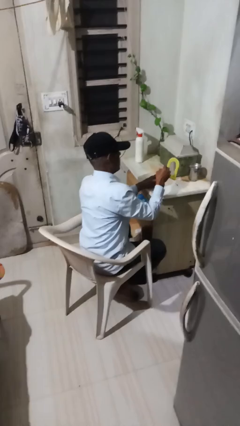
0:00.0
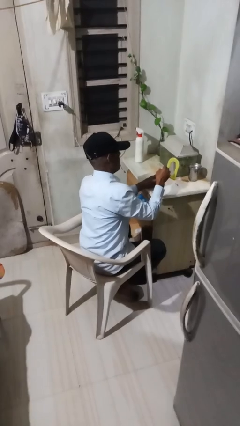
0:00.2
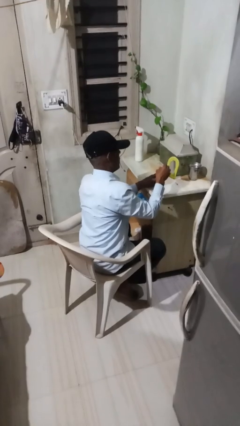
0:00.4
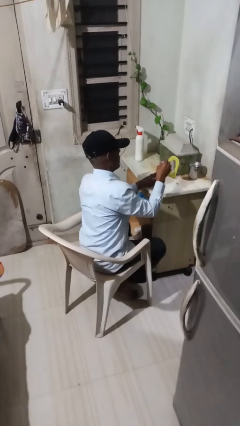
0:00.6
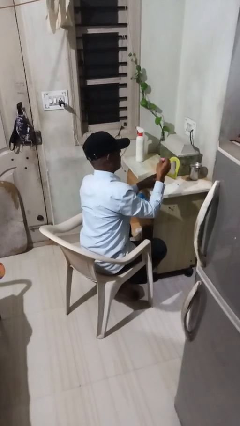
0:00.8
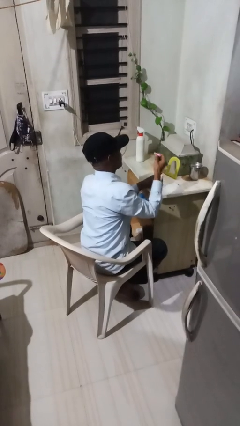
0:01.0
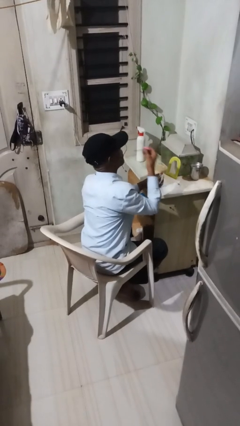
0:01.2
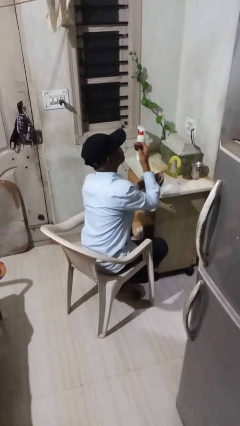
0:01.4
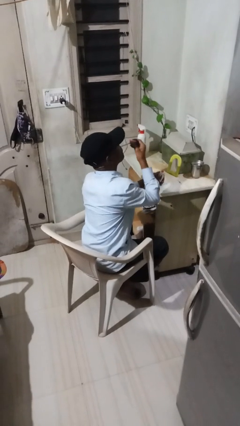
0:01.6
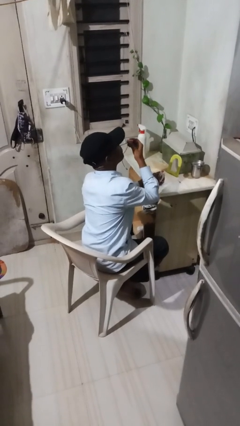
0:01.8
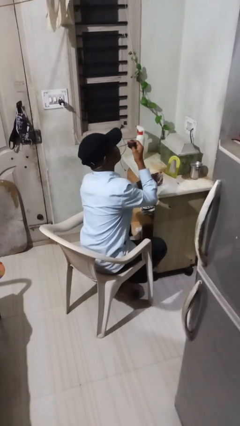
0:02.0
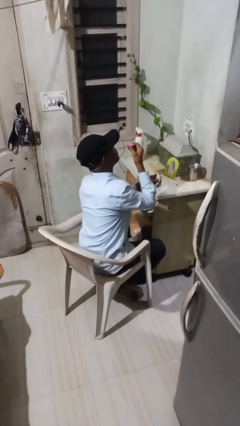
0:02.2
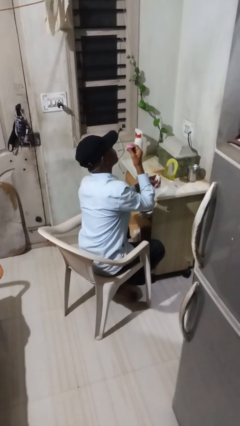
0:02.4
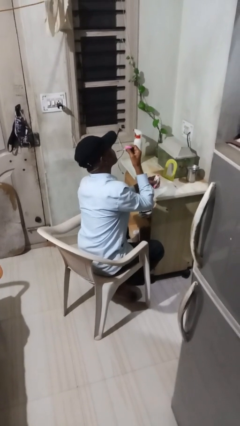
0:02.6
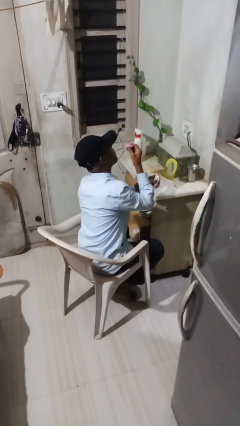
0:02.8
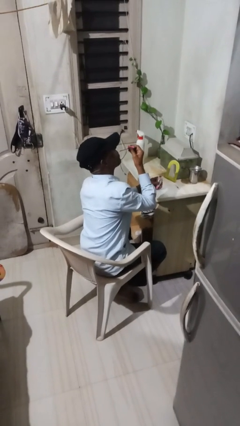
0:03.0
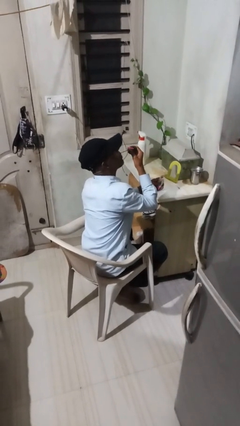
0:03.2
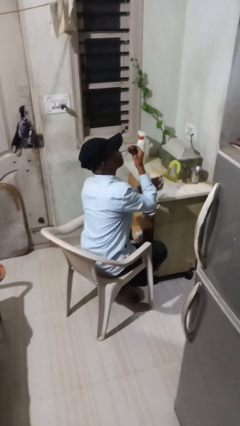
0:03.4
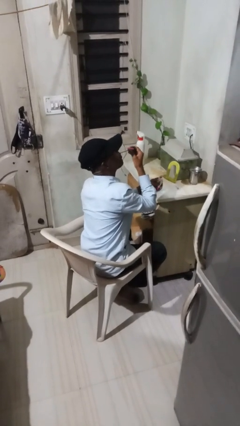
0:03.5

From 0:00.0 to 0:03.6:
person applies lip makeup

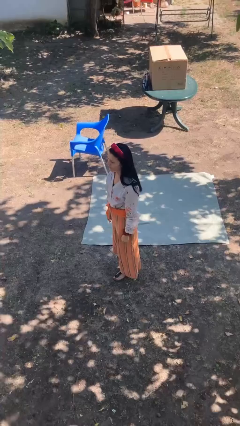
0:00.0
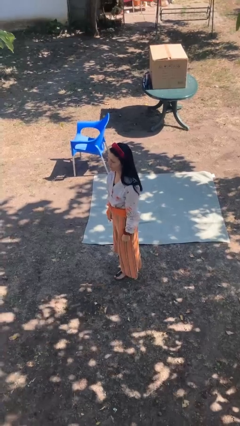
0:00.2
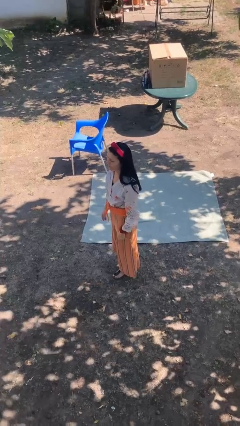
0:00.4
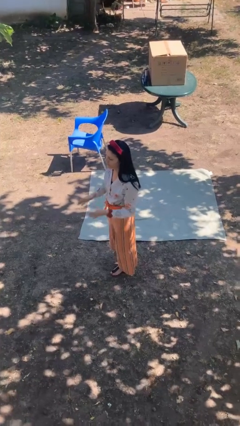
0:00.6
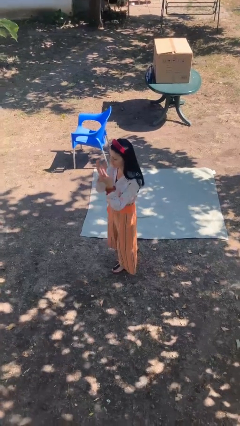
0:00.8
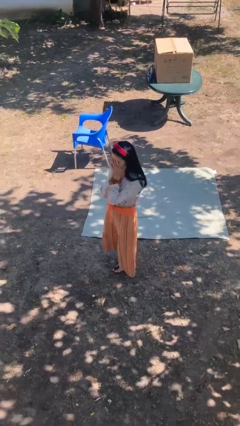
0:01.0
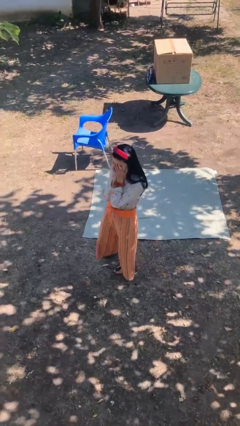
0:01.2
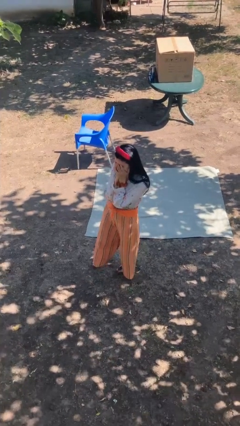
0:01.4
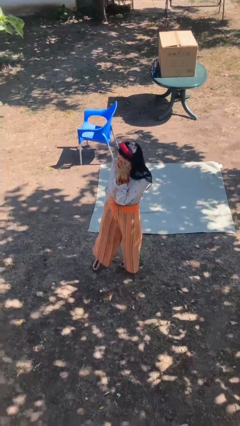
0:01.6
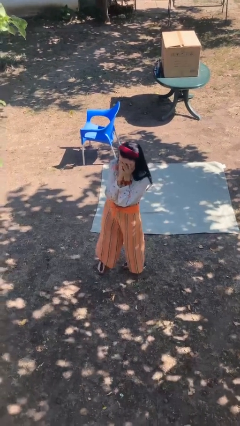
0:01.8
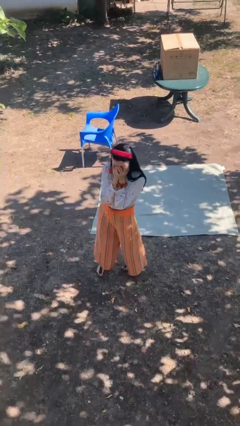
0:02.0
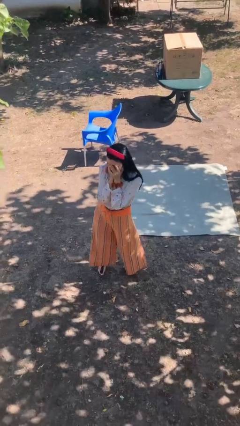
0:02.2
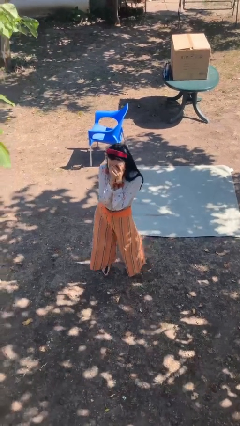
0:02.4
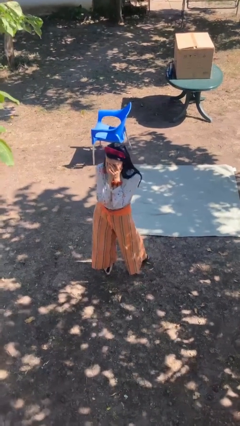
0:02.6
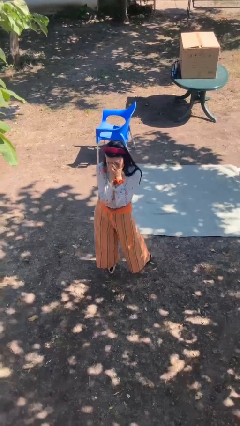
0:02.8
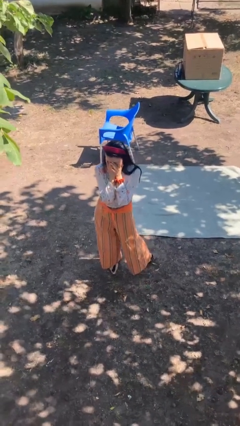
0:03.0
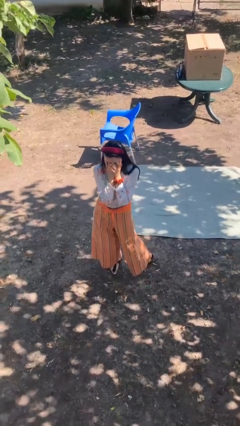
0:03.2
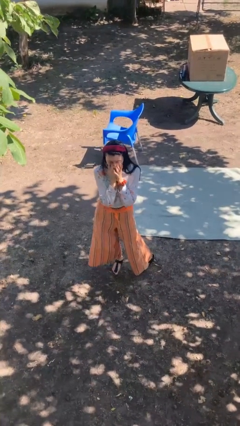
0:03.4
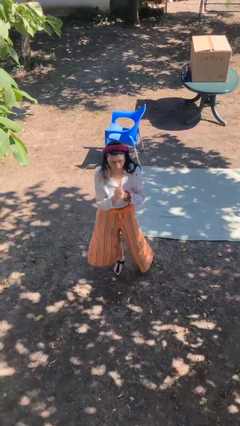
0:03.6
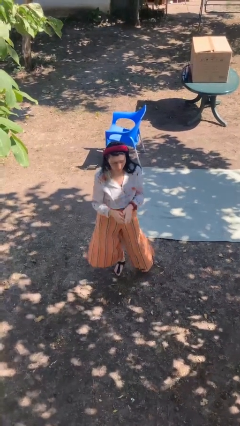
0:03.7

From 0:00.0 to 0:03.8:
person covers face with hands

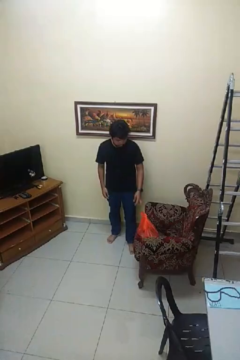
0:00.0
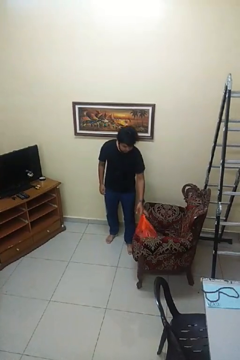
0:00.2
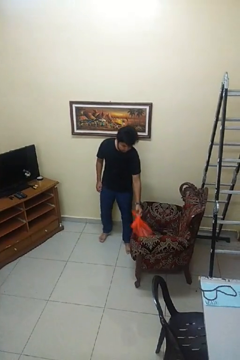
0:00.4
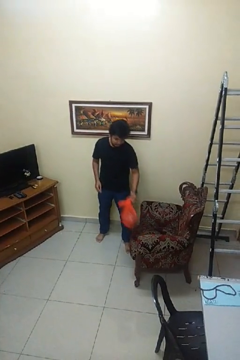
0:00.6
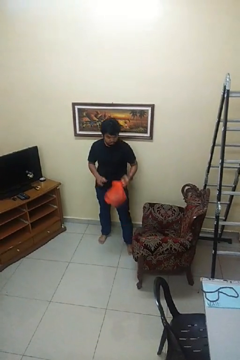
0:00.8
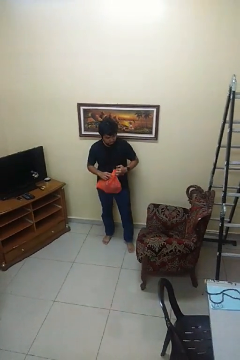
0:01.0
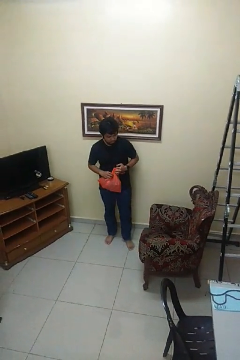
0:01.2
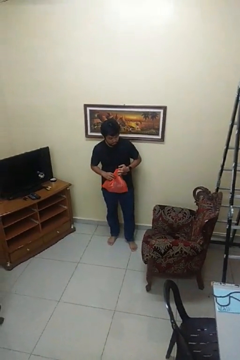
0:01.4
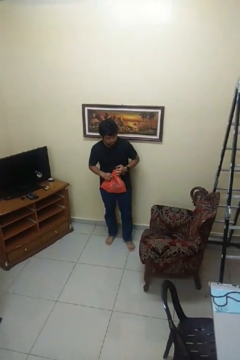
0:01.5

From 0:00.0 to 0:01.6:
person picks up object from couch

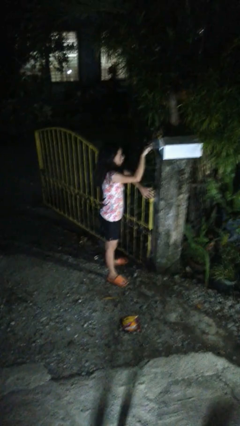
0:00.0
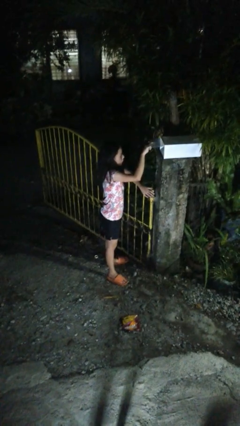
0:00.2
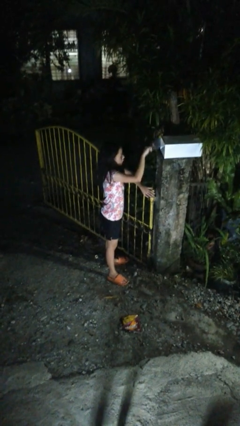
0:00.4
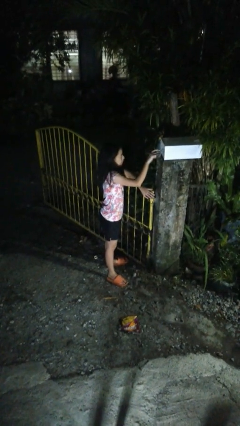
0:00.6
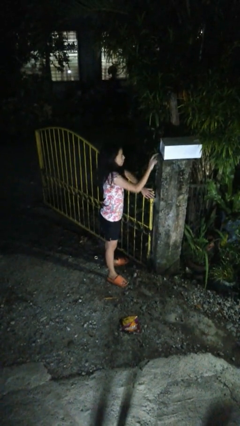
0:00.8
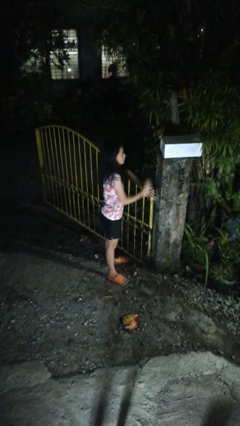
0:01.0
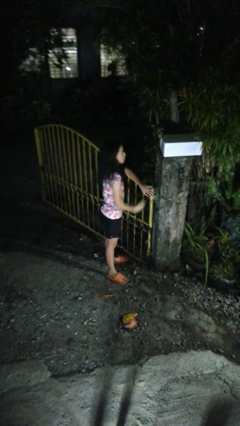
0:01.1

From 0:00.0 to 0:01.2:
person closes mailbox

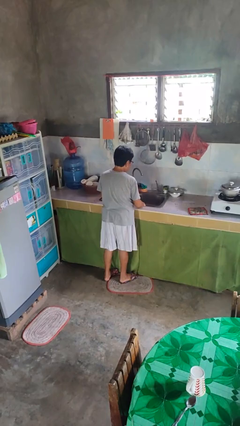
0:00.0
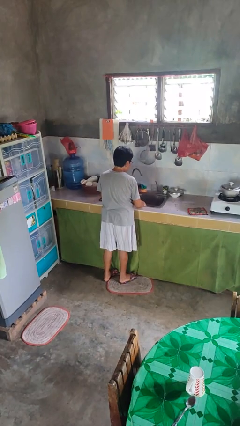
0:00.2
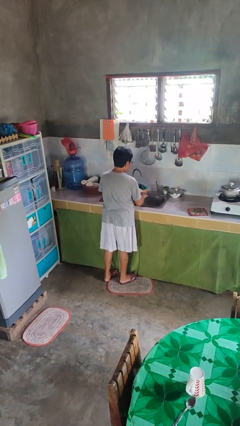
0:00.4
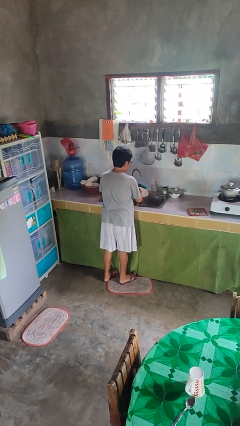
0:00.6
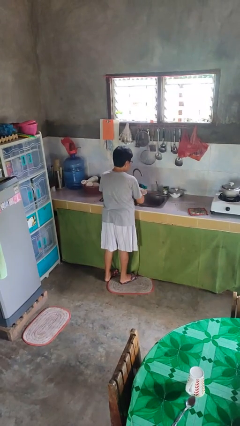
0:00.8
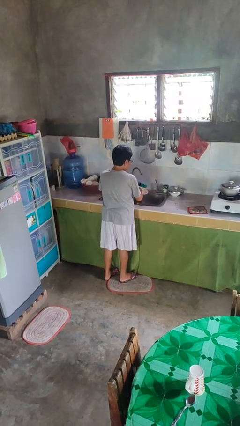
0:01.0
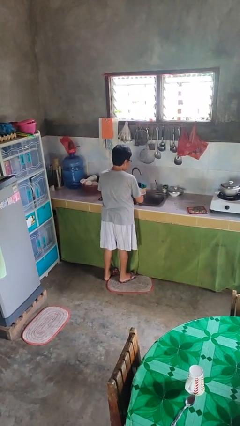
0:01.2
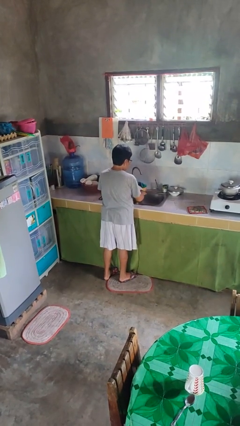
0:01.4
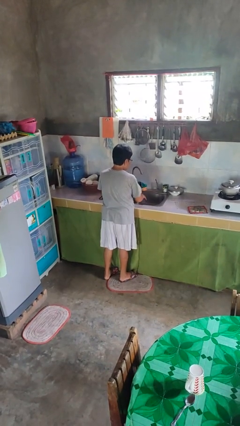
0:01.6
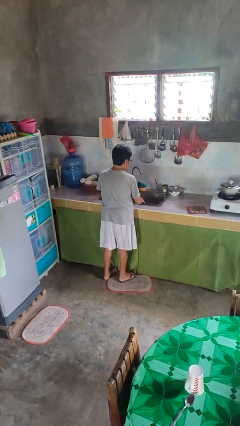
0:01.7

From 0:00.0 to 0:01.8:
person washes dish

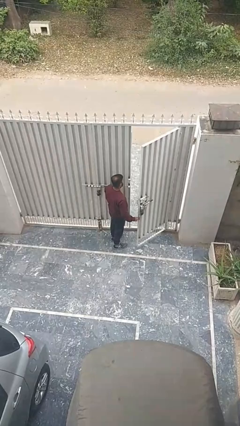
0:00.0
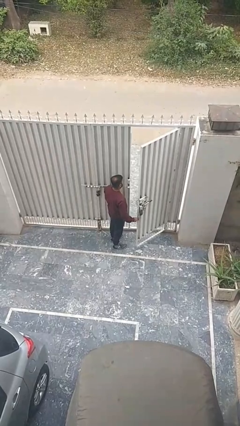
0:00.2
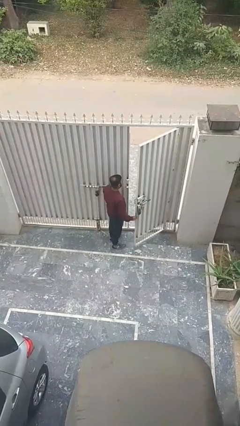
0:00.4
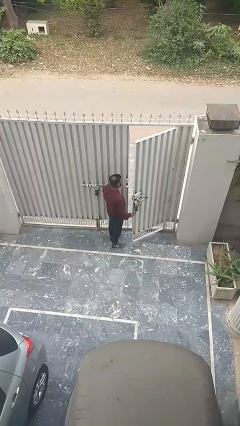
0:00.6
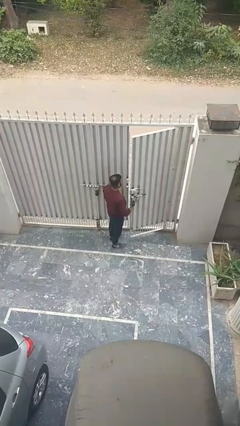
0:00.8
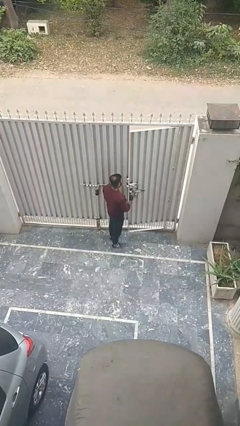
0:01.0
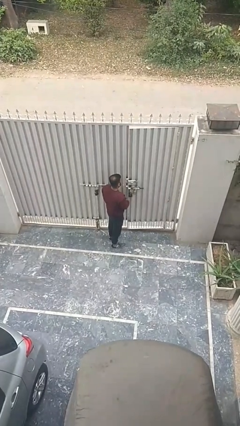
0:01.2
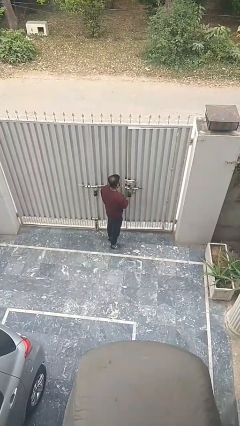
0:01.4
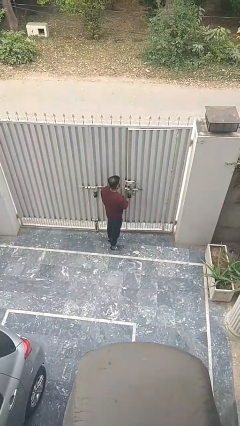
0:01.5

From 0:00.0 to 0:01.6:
person closes facility door

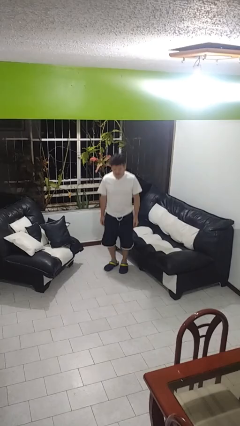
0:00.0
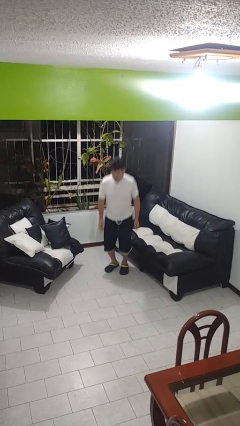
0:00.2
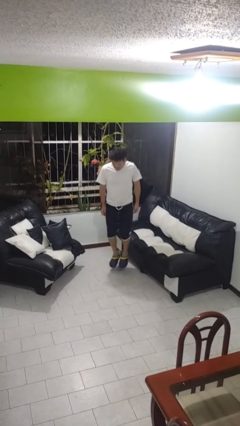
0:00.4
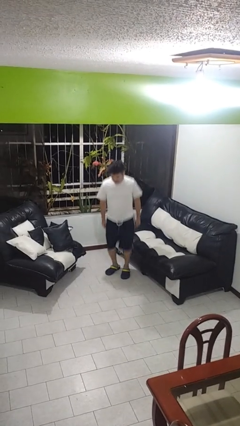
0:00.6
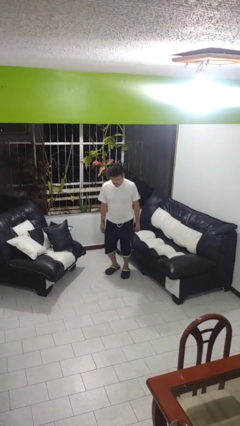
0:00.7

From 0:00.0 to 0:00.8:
person jumps

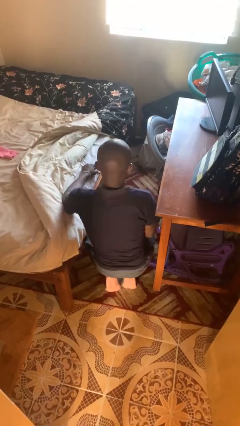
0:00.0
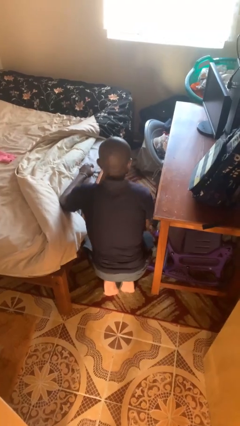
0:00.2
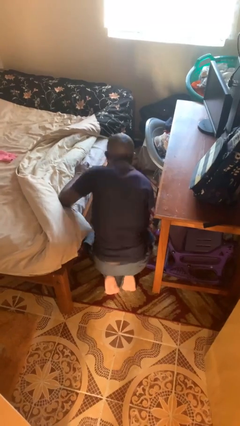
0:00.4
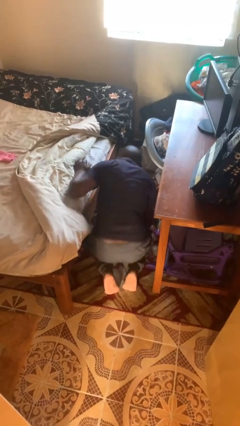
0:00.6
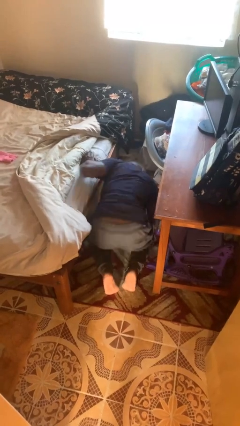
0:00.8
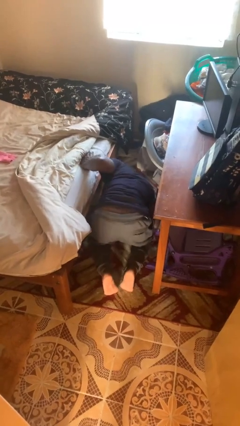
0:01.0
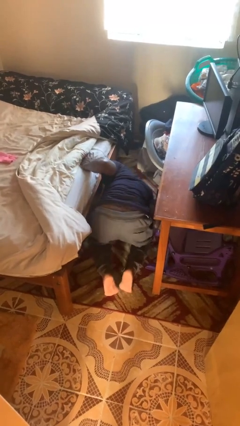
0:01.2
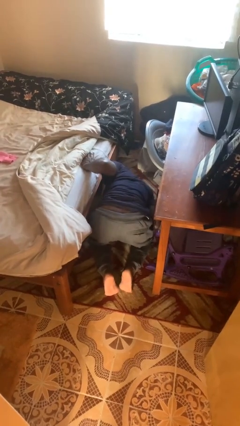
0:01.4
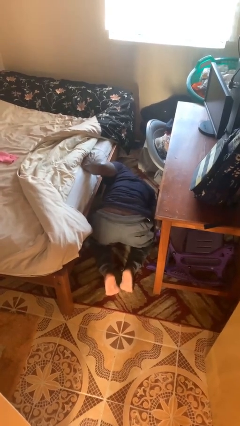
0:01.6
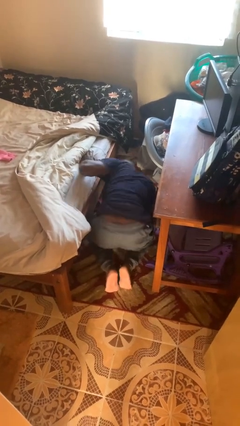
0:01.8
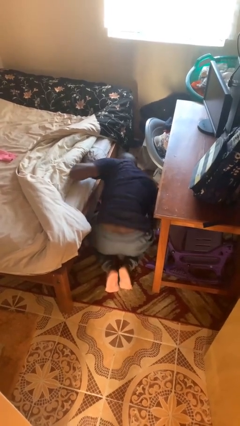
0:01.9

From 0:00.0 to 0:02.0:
person searches under bed

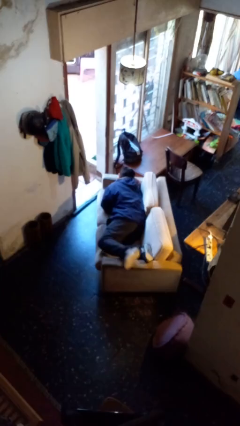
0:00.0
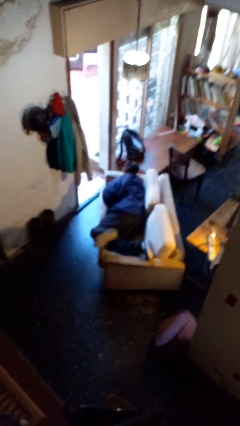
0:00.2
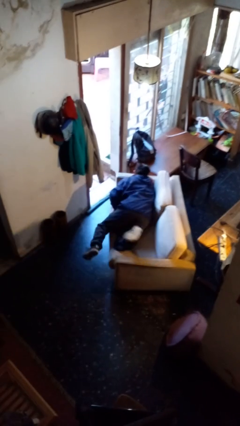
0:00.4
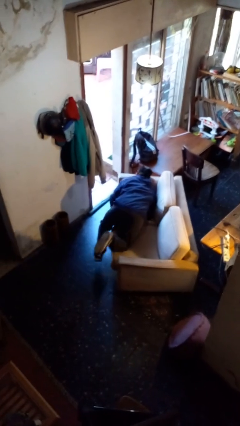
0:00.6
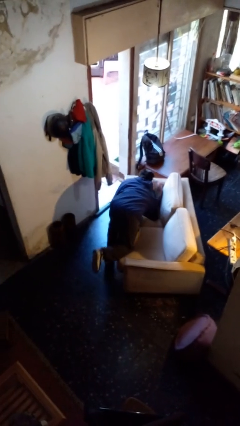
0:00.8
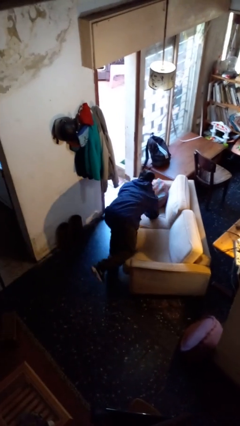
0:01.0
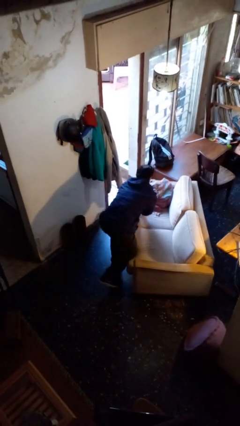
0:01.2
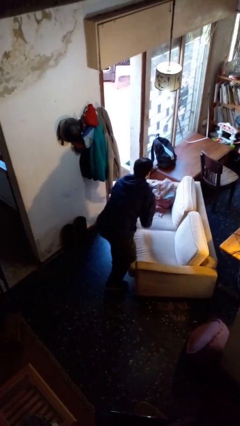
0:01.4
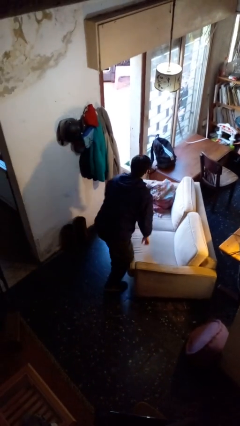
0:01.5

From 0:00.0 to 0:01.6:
person stands up
